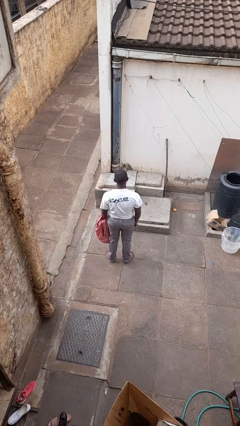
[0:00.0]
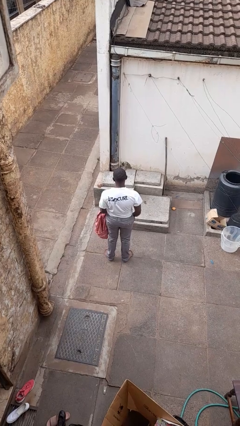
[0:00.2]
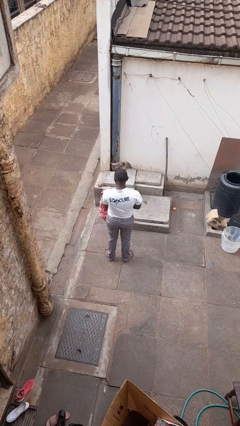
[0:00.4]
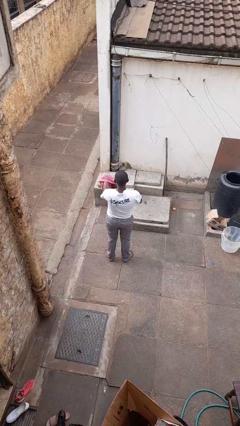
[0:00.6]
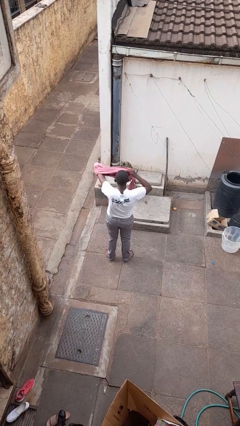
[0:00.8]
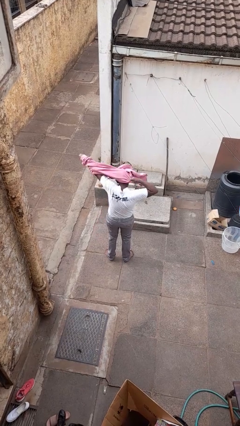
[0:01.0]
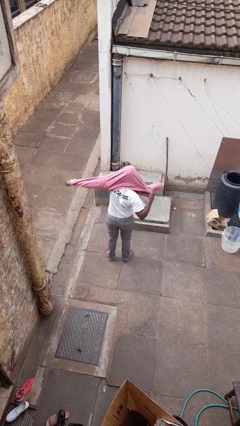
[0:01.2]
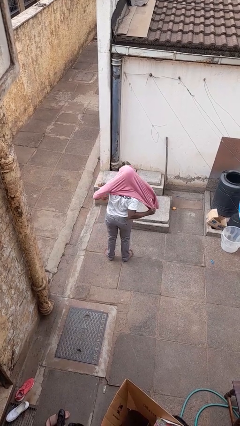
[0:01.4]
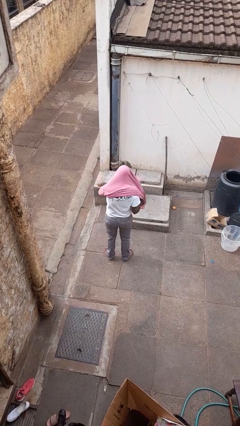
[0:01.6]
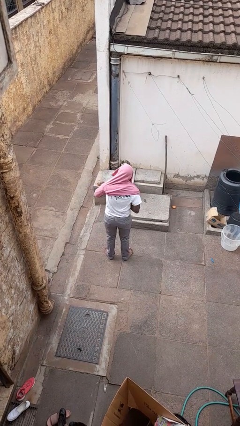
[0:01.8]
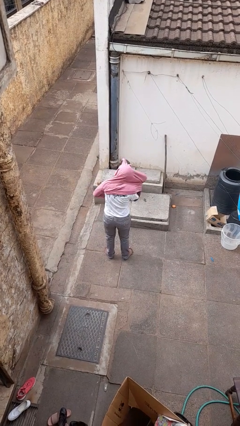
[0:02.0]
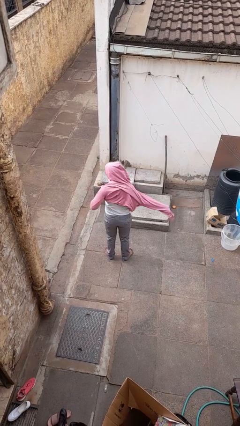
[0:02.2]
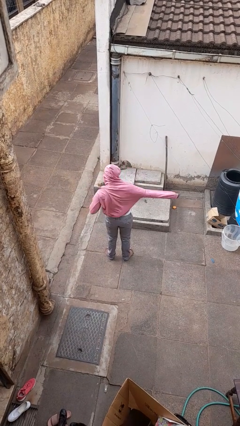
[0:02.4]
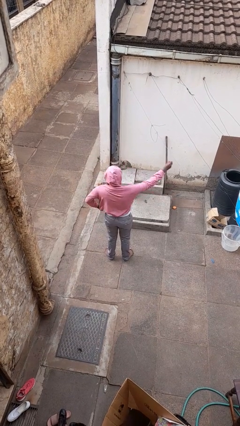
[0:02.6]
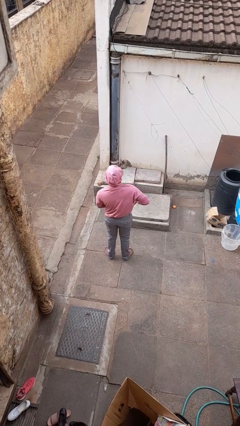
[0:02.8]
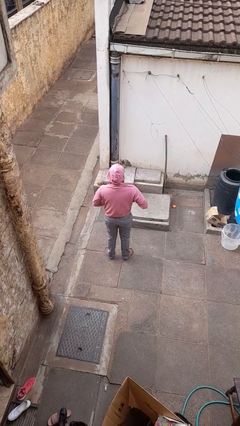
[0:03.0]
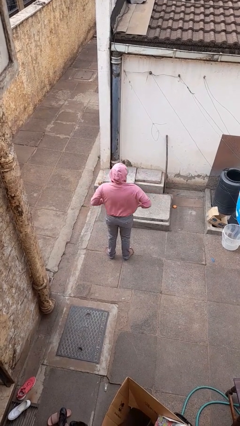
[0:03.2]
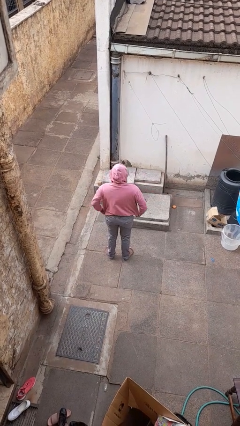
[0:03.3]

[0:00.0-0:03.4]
person puts on hoodie

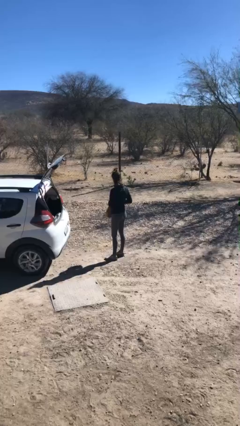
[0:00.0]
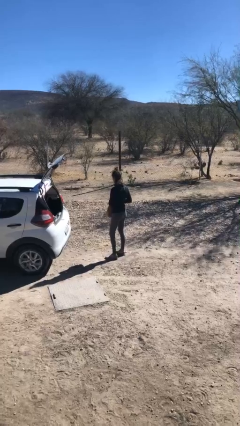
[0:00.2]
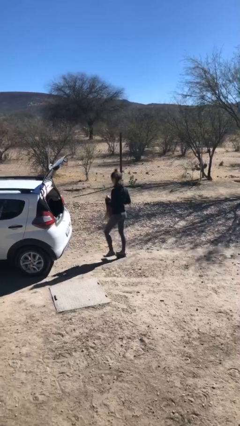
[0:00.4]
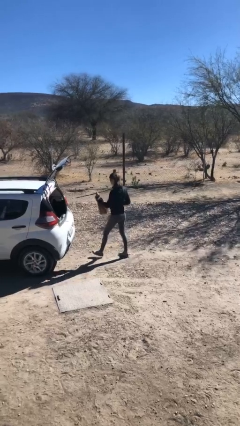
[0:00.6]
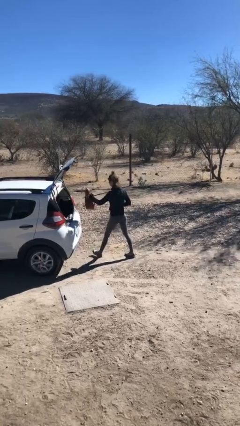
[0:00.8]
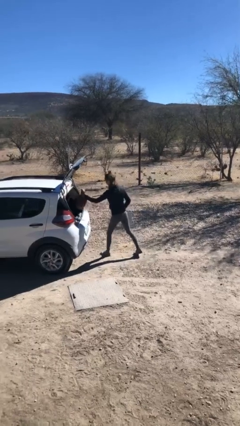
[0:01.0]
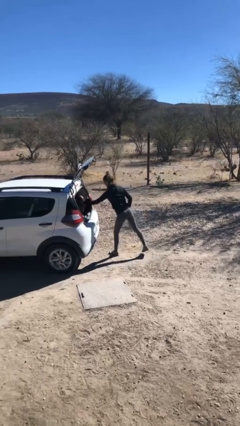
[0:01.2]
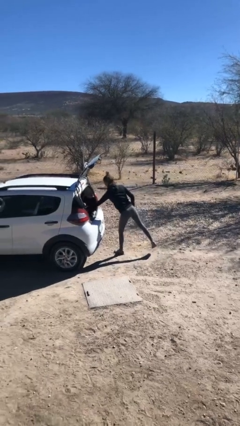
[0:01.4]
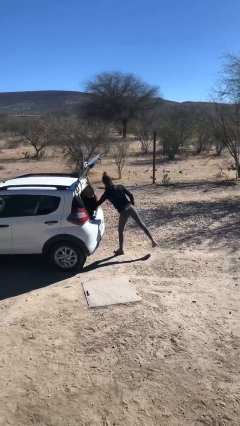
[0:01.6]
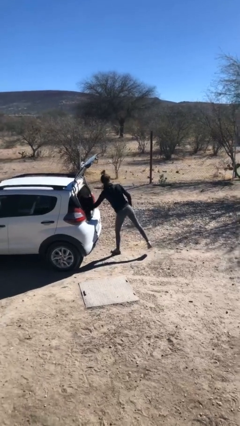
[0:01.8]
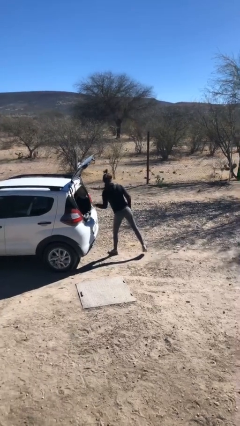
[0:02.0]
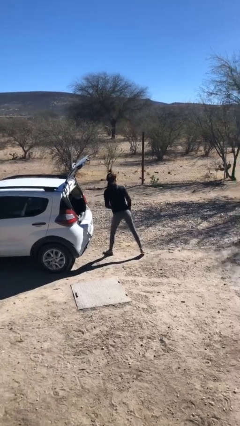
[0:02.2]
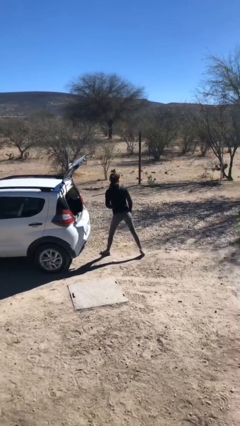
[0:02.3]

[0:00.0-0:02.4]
person loads car

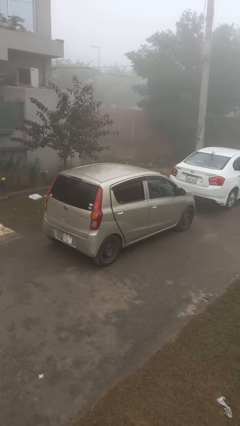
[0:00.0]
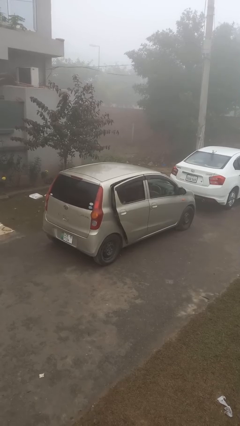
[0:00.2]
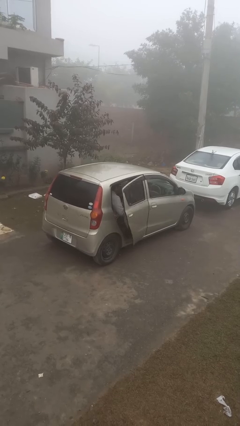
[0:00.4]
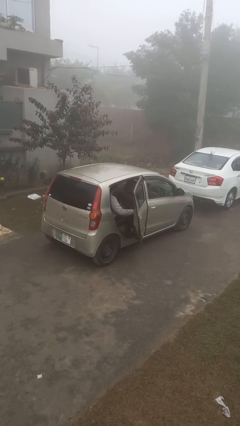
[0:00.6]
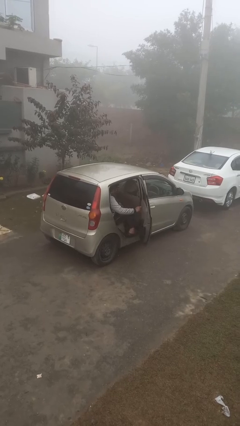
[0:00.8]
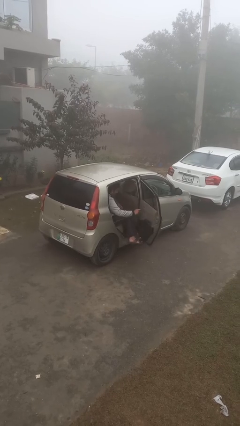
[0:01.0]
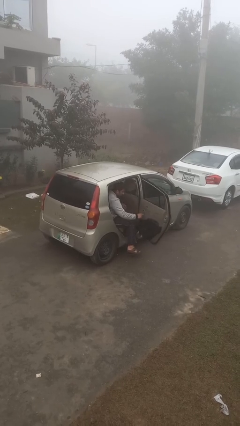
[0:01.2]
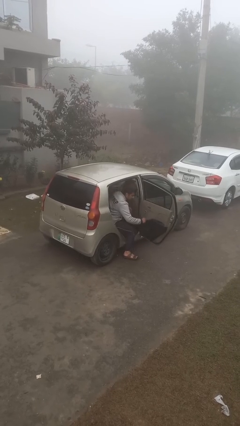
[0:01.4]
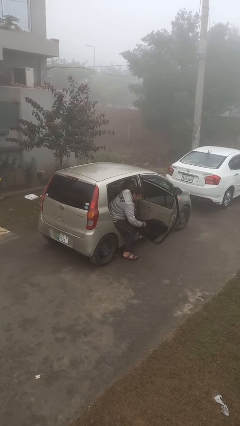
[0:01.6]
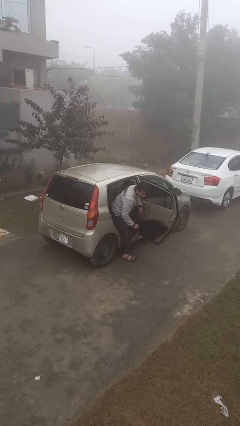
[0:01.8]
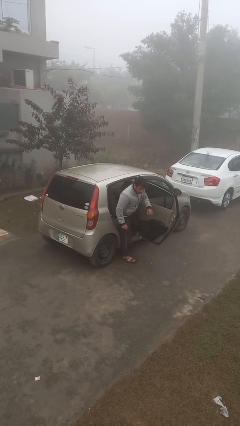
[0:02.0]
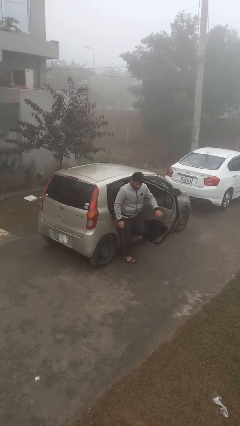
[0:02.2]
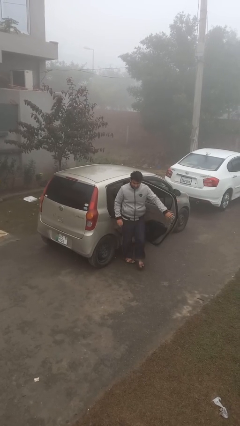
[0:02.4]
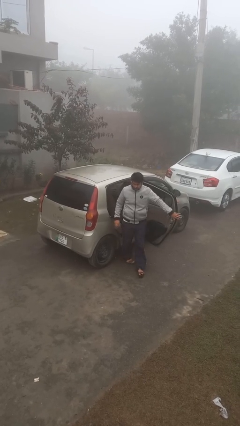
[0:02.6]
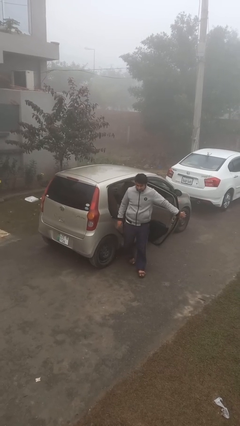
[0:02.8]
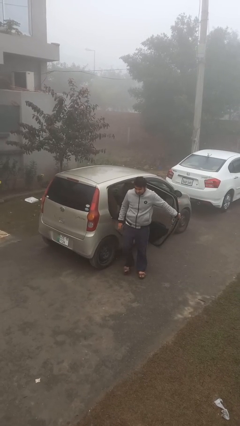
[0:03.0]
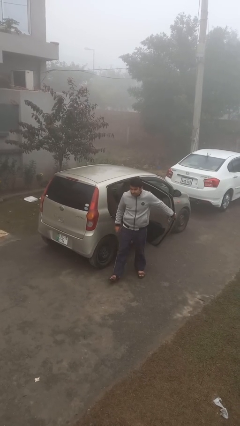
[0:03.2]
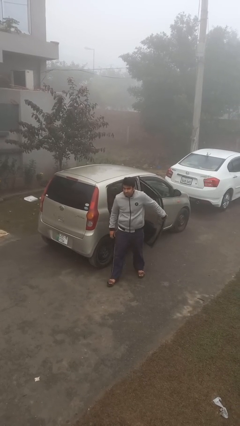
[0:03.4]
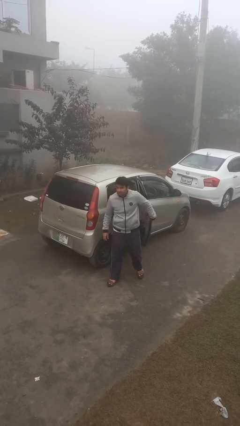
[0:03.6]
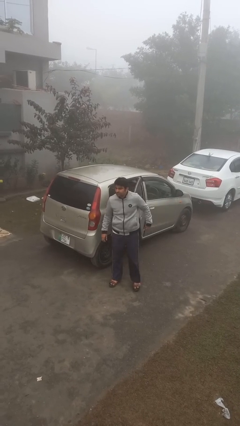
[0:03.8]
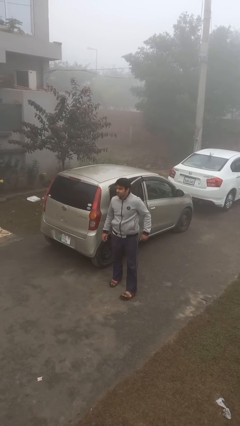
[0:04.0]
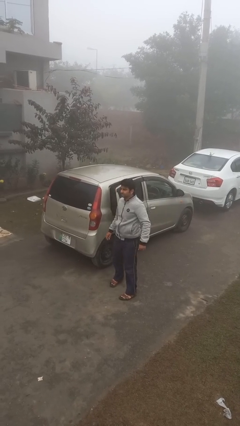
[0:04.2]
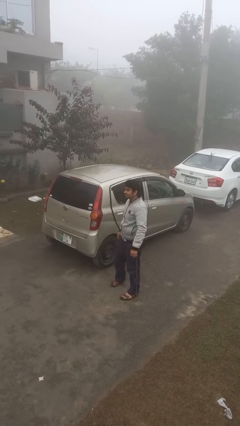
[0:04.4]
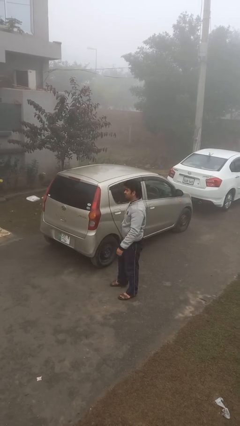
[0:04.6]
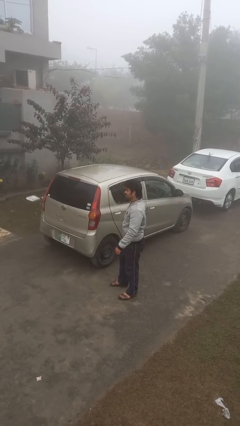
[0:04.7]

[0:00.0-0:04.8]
car drops off person

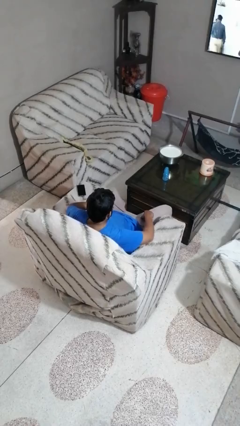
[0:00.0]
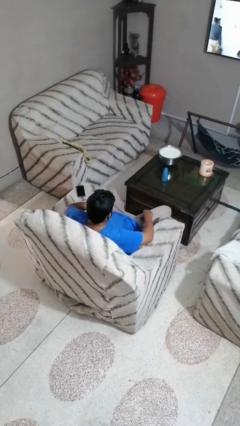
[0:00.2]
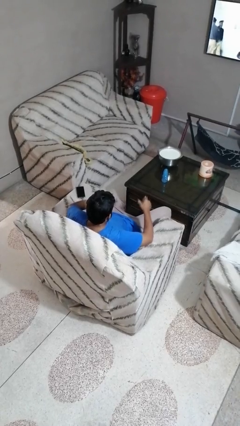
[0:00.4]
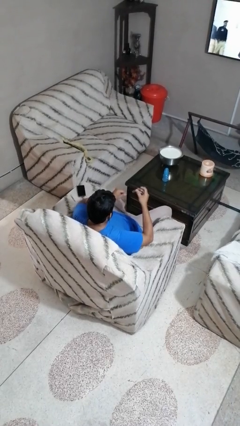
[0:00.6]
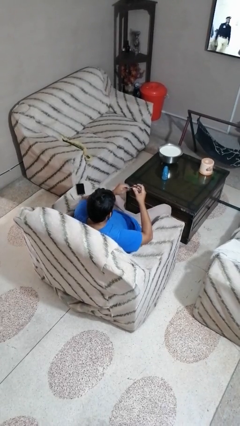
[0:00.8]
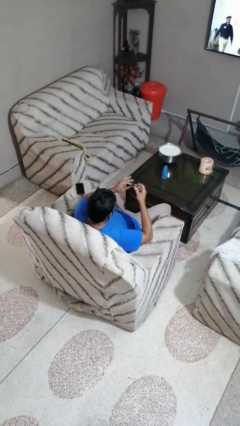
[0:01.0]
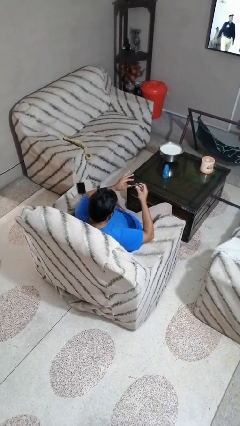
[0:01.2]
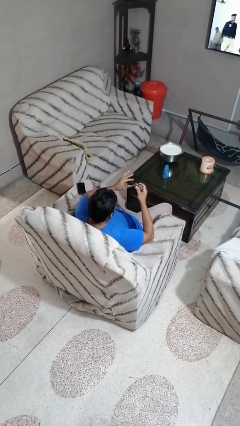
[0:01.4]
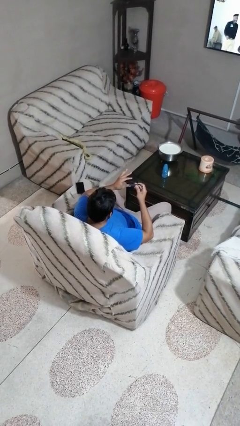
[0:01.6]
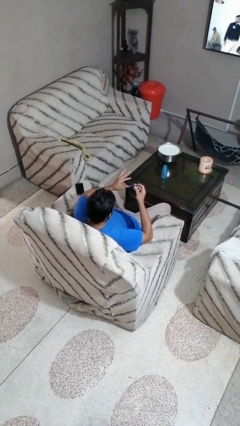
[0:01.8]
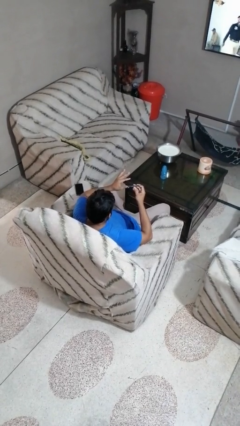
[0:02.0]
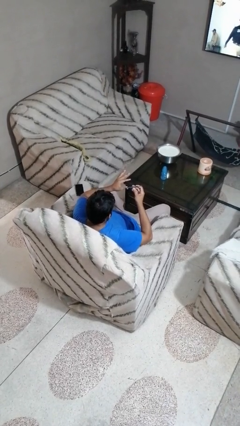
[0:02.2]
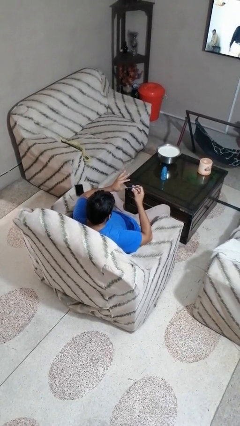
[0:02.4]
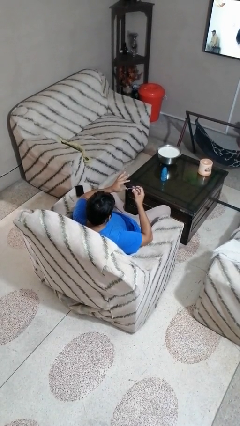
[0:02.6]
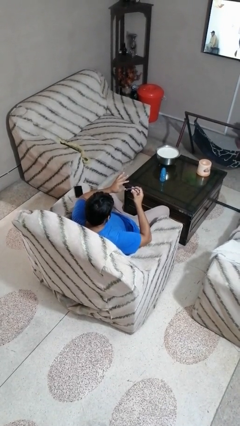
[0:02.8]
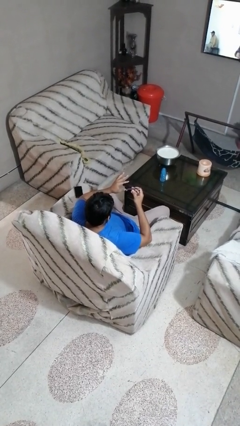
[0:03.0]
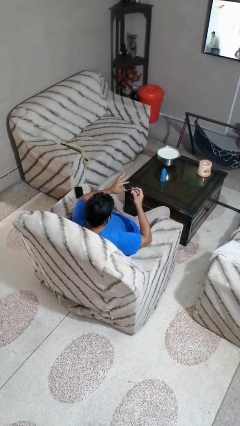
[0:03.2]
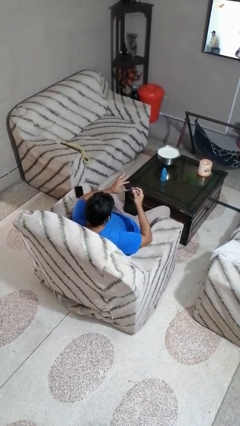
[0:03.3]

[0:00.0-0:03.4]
person clips fingernails

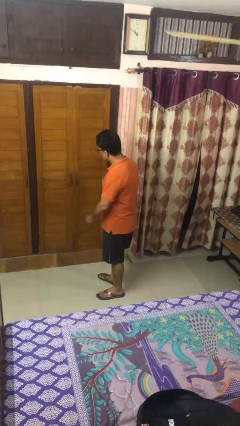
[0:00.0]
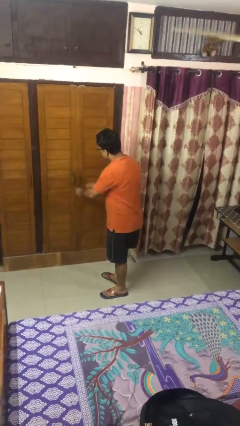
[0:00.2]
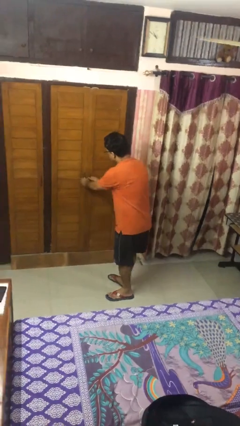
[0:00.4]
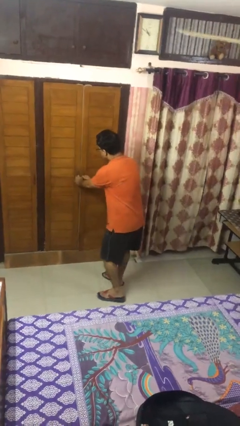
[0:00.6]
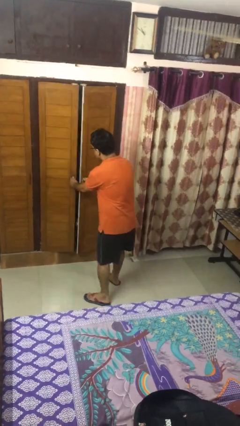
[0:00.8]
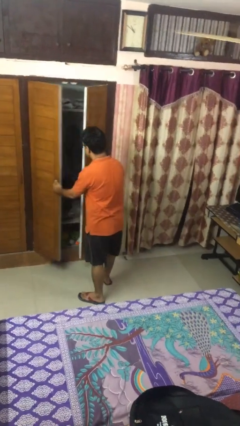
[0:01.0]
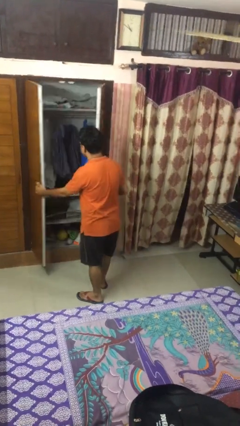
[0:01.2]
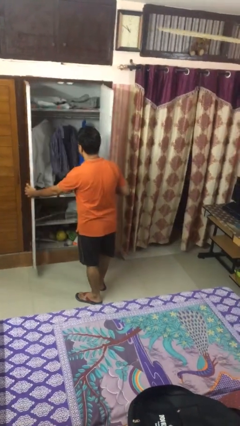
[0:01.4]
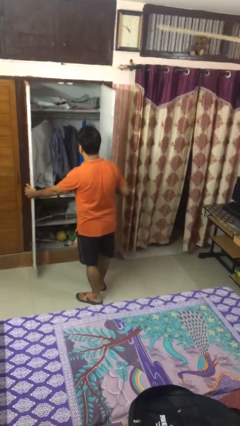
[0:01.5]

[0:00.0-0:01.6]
person opens closet door

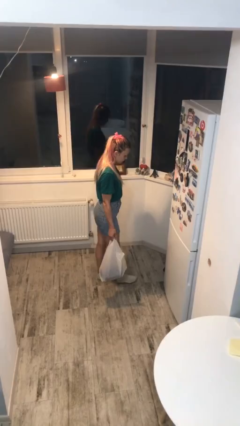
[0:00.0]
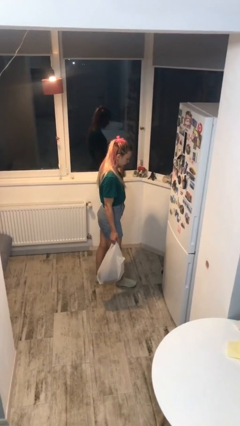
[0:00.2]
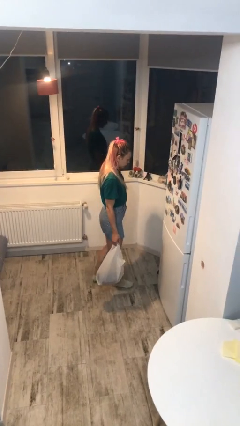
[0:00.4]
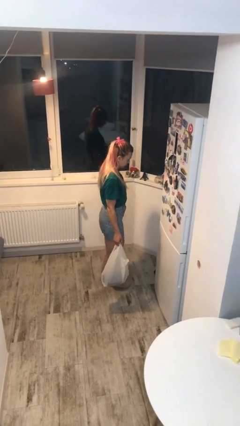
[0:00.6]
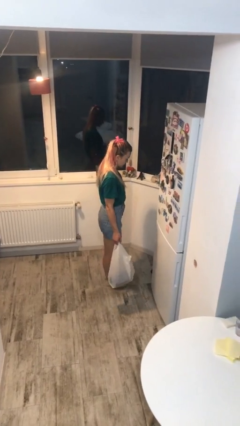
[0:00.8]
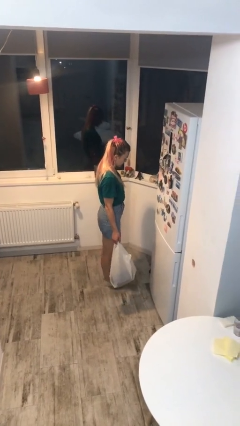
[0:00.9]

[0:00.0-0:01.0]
person carries groceries

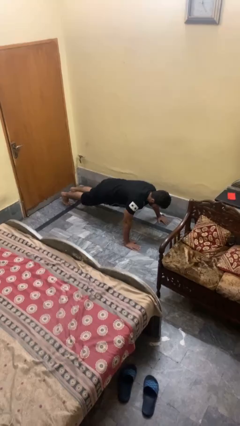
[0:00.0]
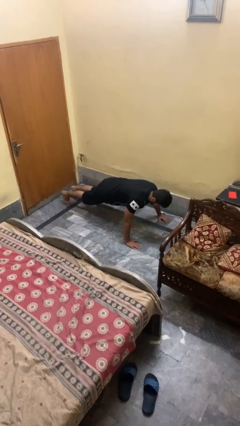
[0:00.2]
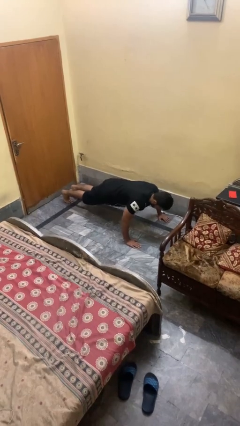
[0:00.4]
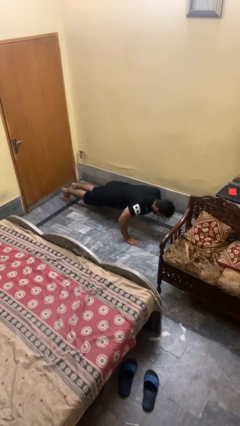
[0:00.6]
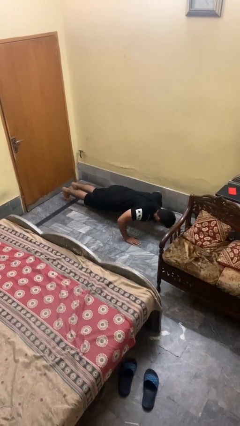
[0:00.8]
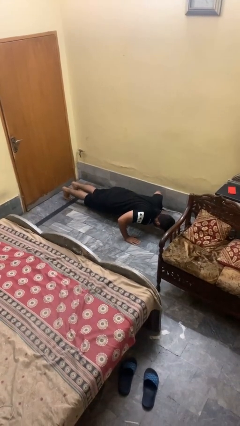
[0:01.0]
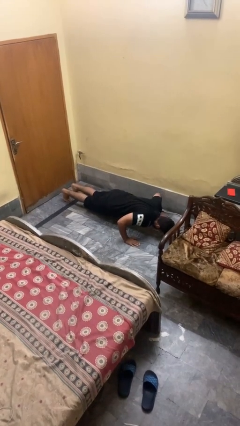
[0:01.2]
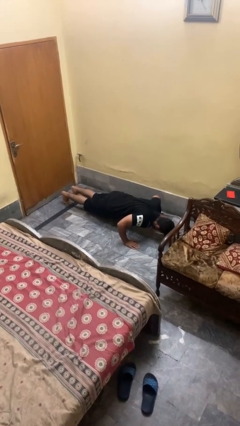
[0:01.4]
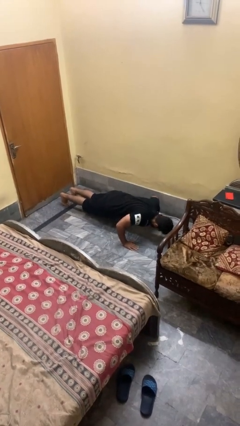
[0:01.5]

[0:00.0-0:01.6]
person exercises with pushup
